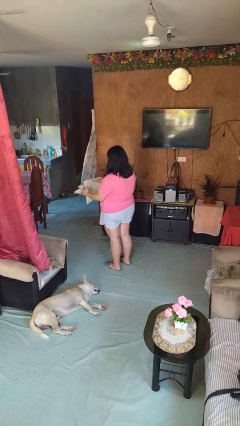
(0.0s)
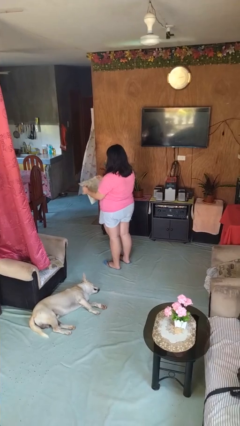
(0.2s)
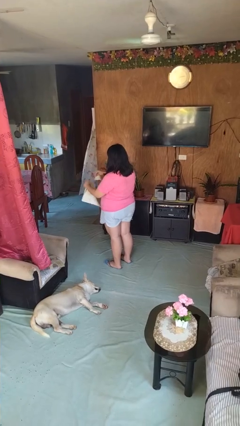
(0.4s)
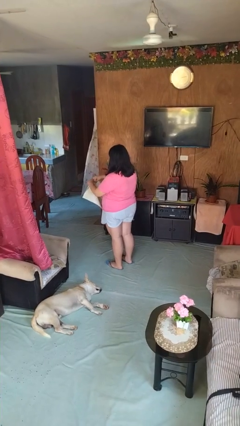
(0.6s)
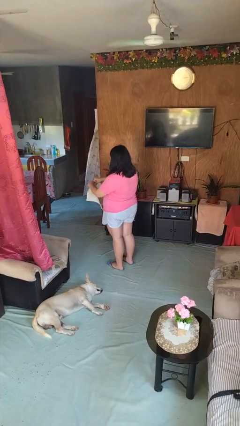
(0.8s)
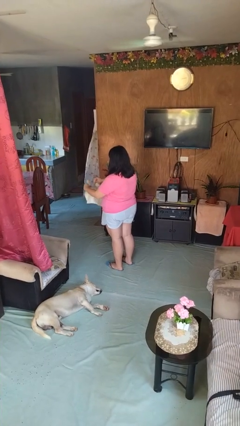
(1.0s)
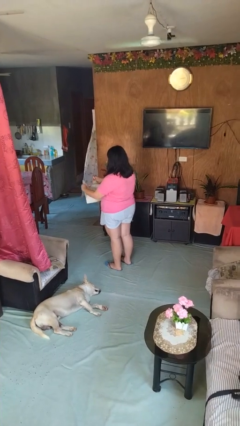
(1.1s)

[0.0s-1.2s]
person tears paper

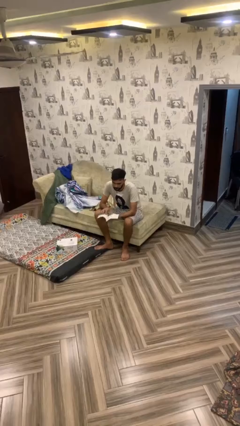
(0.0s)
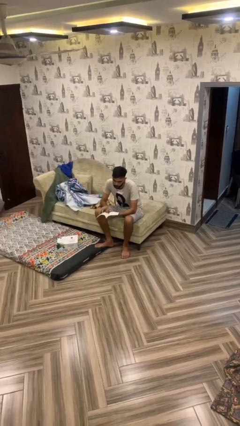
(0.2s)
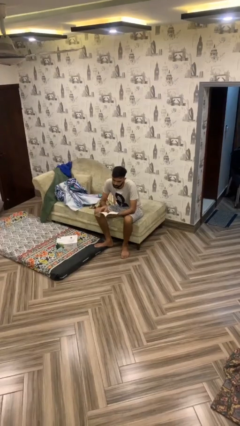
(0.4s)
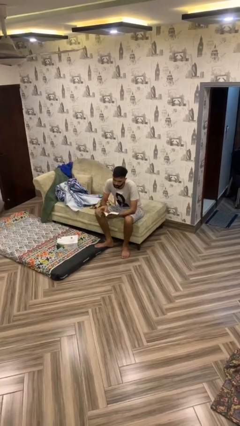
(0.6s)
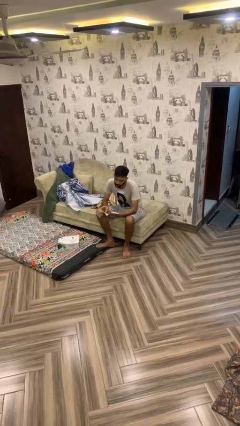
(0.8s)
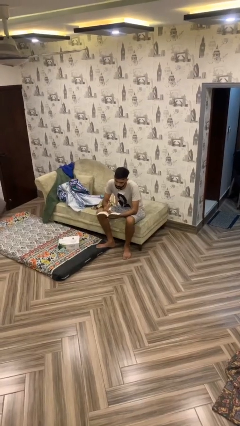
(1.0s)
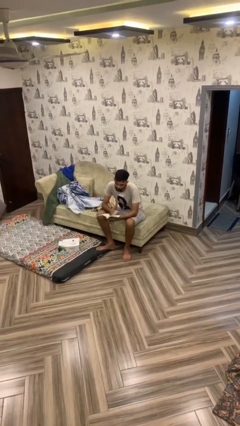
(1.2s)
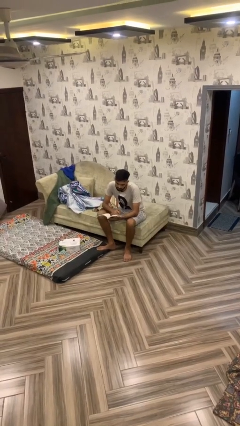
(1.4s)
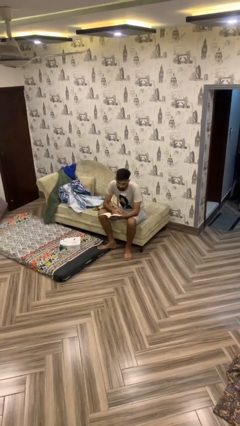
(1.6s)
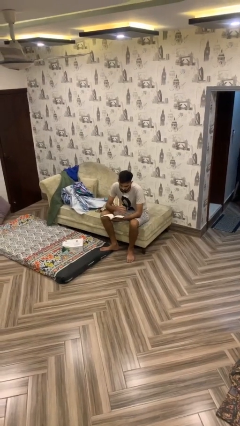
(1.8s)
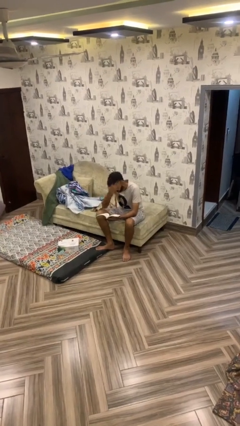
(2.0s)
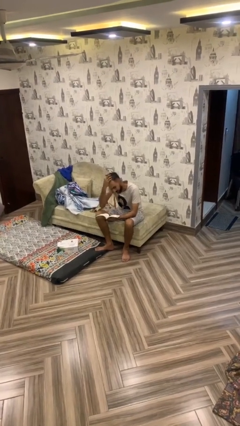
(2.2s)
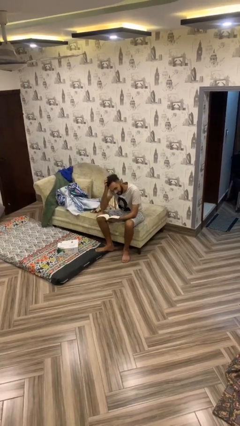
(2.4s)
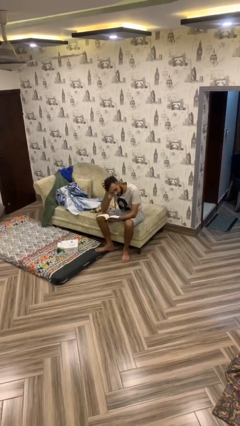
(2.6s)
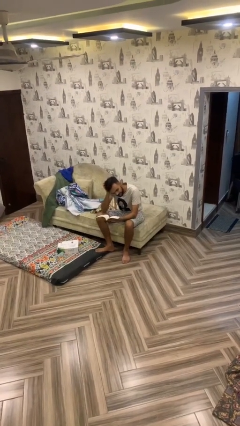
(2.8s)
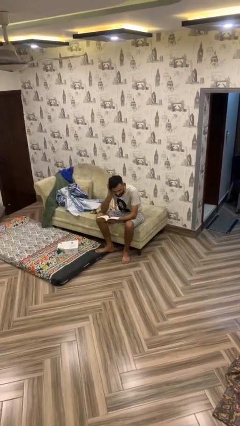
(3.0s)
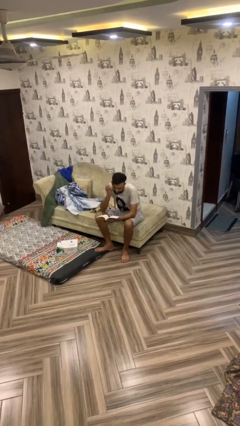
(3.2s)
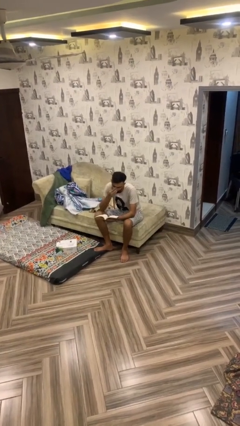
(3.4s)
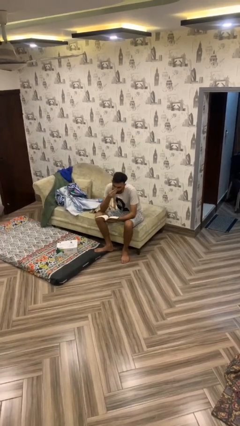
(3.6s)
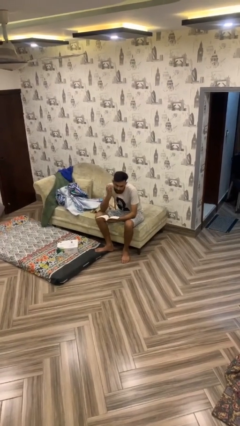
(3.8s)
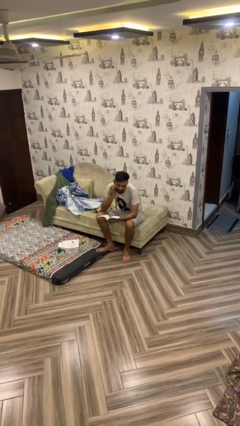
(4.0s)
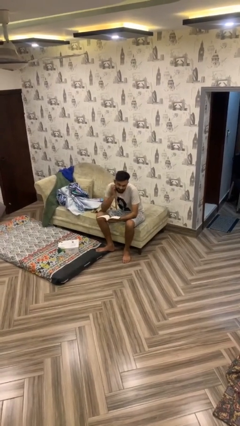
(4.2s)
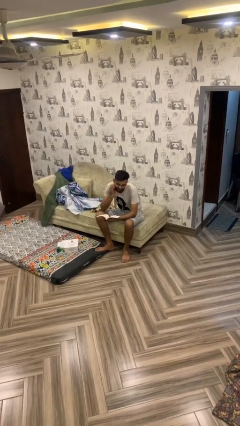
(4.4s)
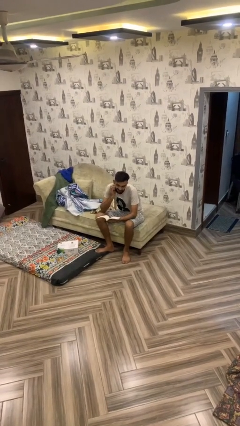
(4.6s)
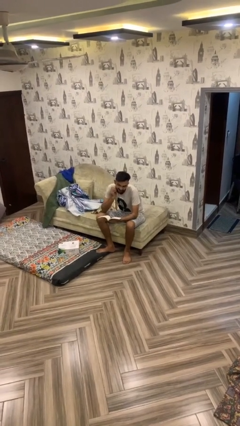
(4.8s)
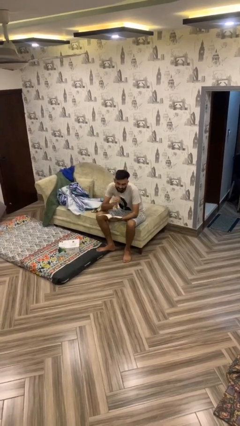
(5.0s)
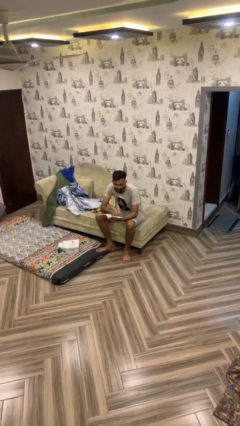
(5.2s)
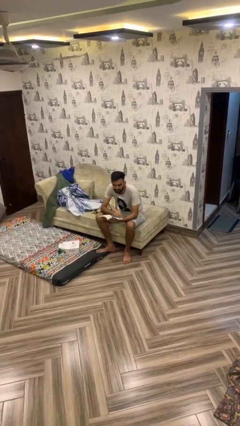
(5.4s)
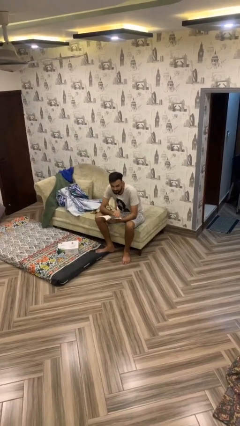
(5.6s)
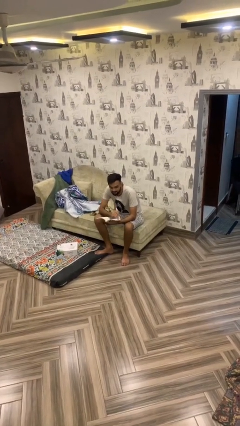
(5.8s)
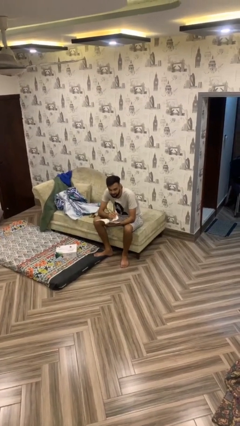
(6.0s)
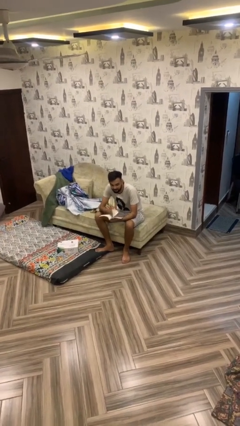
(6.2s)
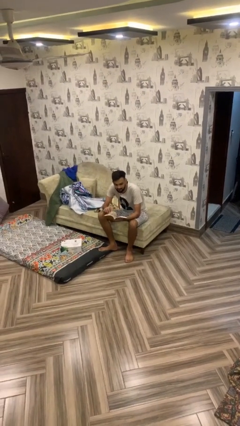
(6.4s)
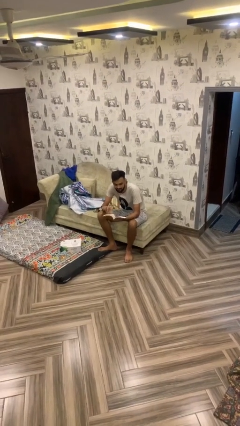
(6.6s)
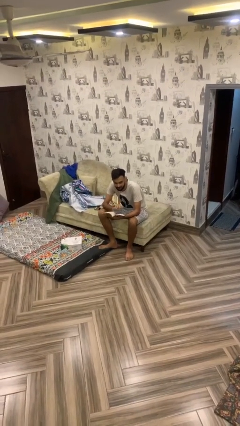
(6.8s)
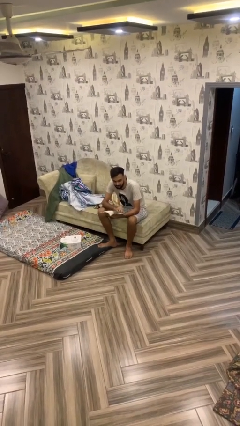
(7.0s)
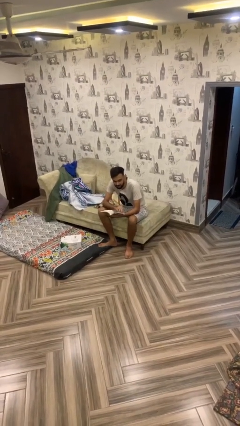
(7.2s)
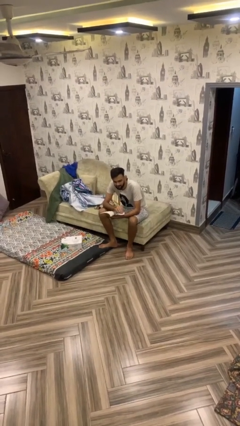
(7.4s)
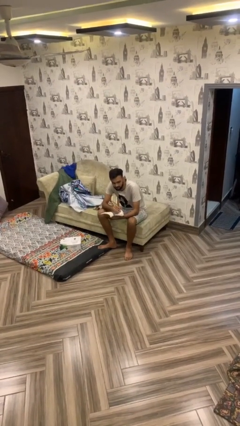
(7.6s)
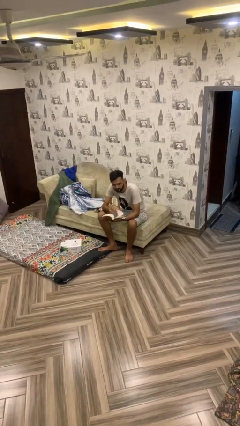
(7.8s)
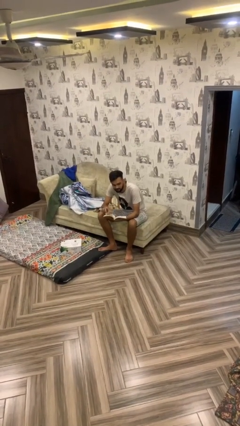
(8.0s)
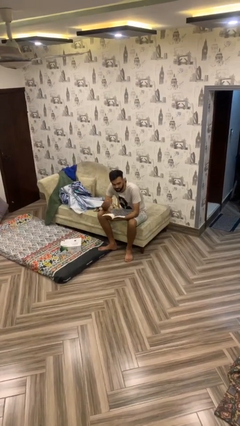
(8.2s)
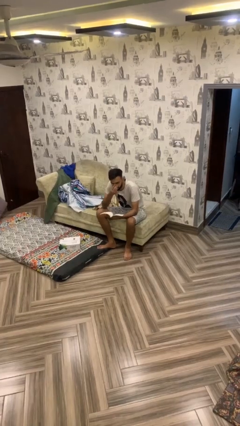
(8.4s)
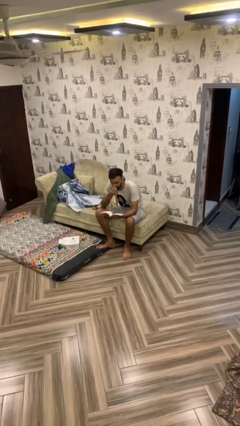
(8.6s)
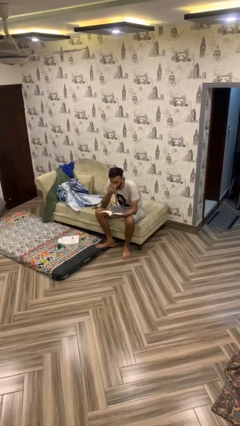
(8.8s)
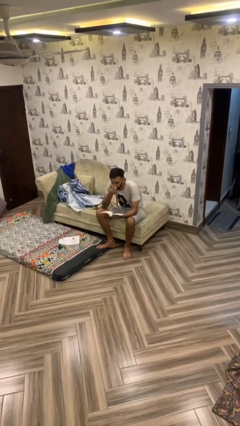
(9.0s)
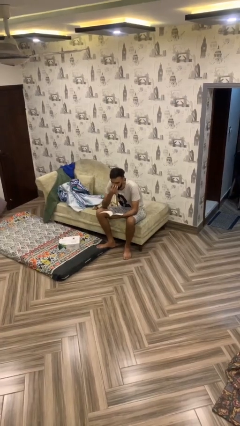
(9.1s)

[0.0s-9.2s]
person reads document

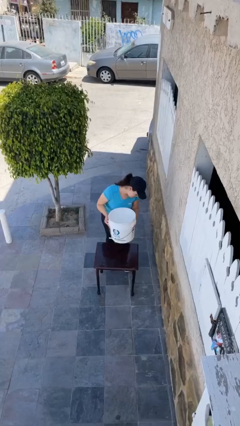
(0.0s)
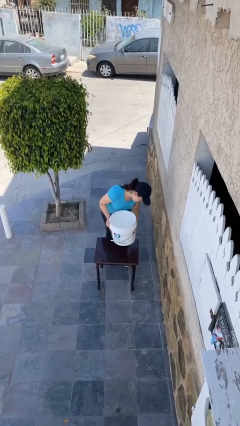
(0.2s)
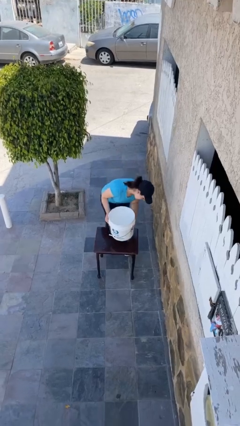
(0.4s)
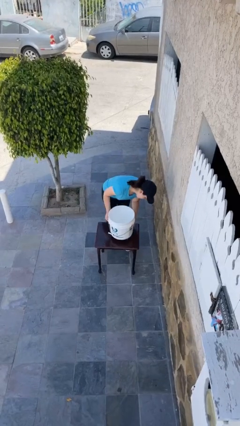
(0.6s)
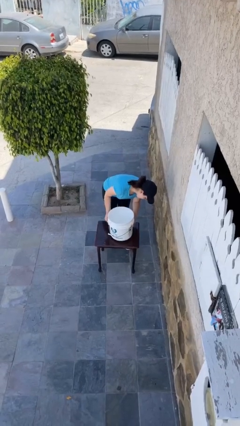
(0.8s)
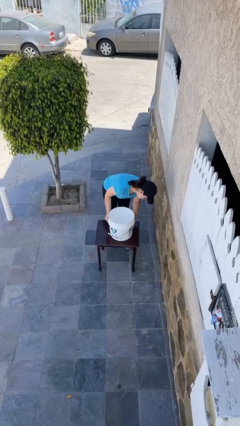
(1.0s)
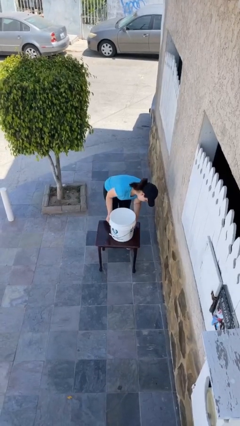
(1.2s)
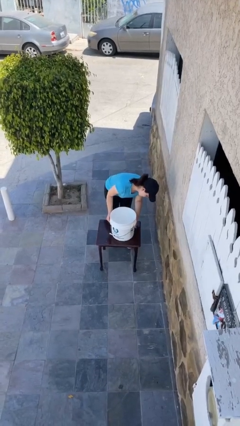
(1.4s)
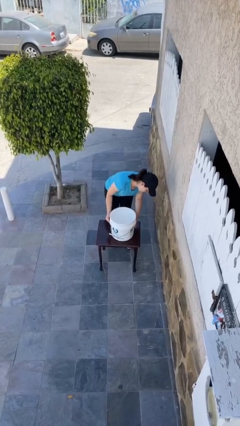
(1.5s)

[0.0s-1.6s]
person puts down object on table

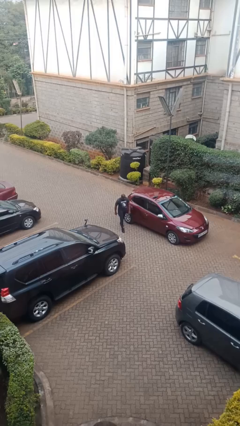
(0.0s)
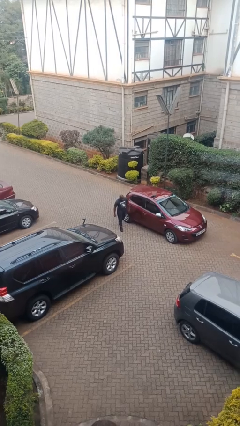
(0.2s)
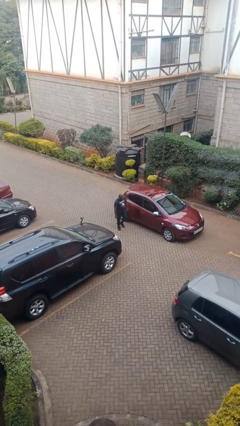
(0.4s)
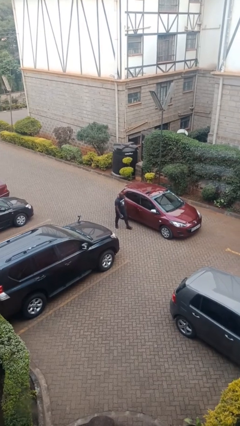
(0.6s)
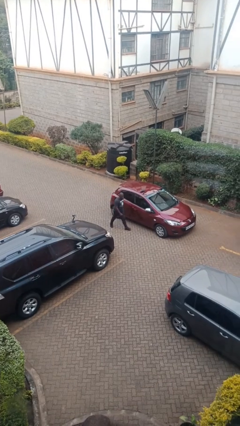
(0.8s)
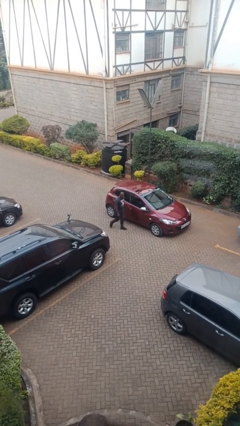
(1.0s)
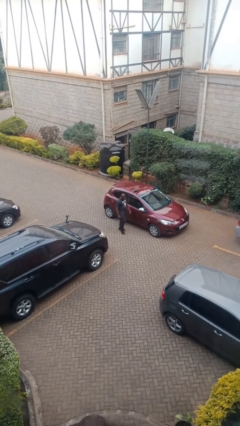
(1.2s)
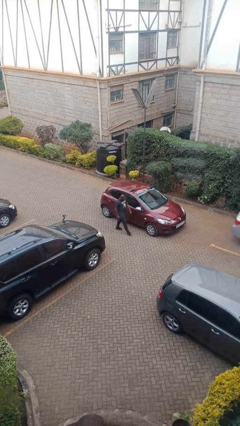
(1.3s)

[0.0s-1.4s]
person kicks car tires

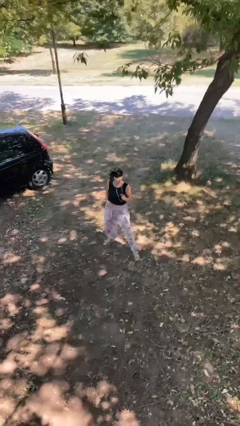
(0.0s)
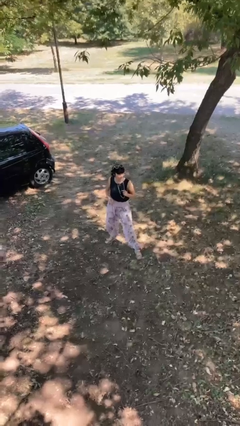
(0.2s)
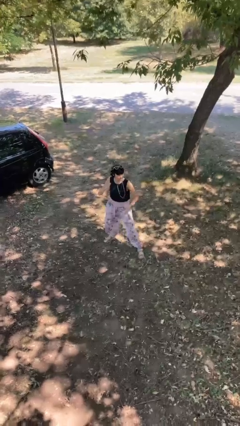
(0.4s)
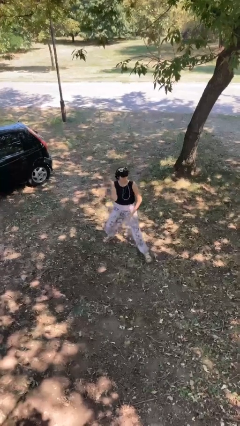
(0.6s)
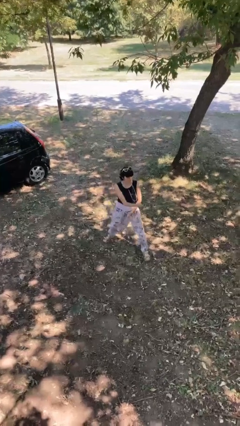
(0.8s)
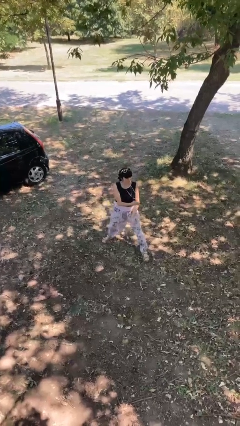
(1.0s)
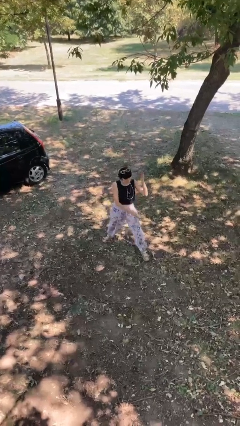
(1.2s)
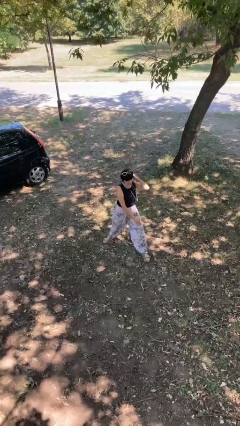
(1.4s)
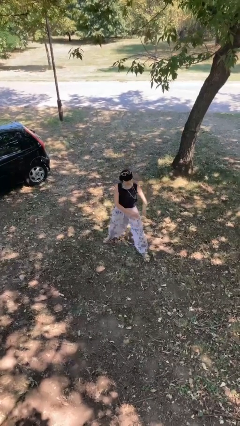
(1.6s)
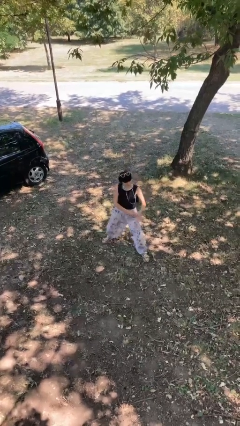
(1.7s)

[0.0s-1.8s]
person karate chop

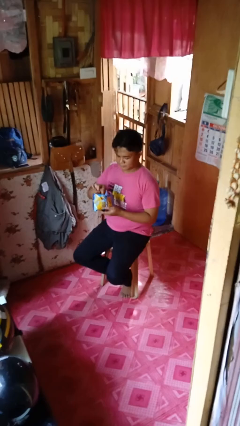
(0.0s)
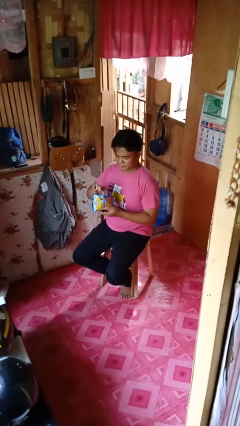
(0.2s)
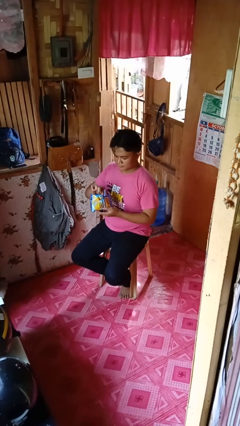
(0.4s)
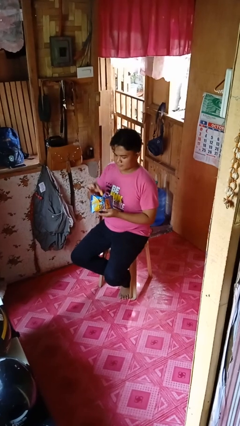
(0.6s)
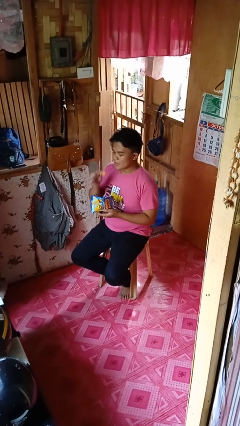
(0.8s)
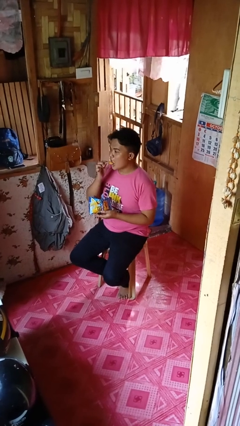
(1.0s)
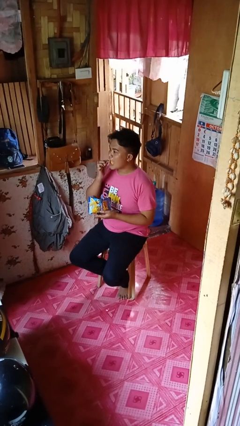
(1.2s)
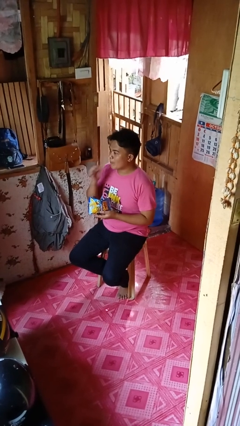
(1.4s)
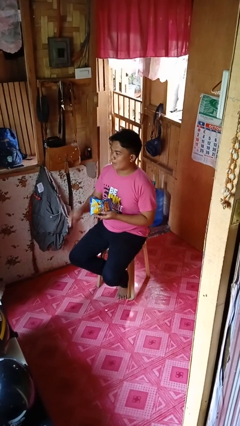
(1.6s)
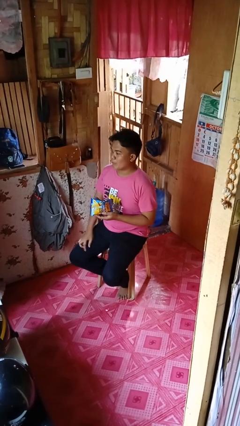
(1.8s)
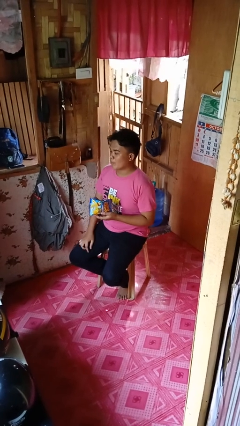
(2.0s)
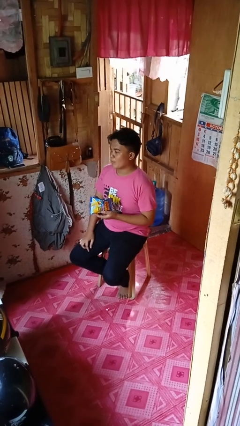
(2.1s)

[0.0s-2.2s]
person eats snack from bag
